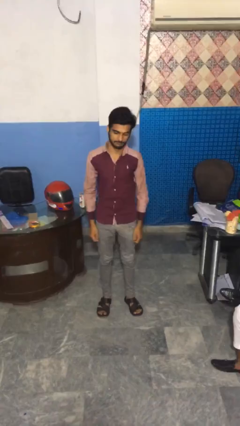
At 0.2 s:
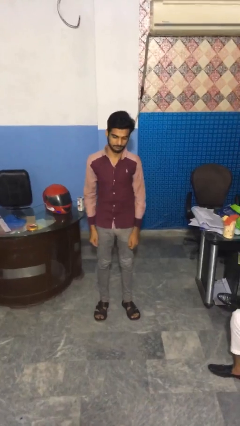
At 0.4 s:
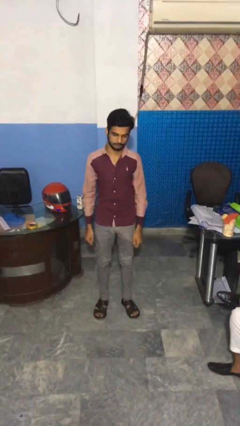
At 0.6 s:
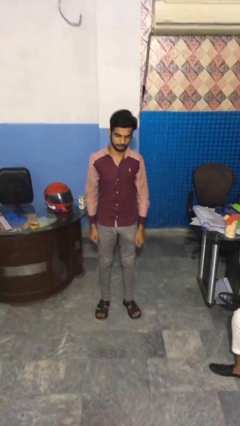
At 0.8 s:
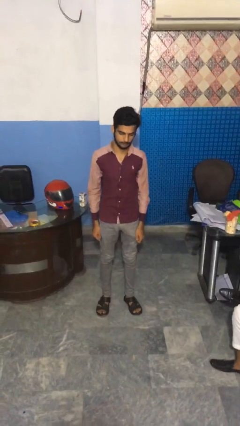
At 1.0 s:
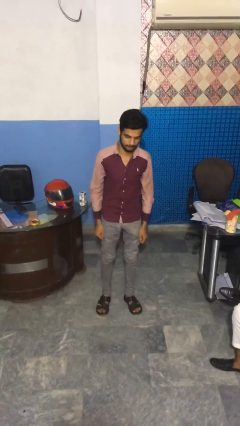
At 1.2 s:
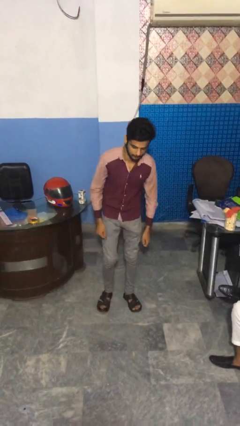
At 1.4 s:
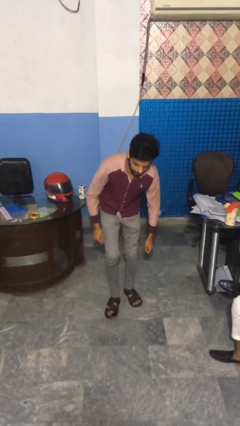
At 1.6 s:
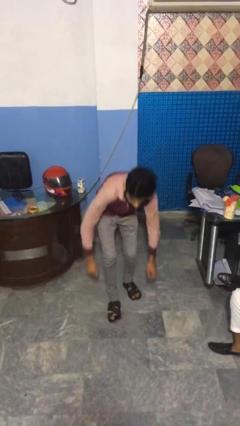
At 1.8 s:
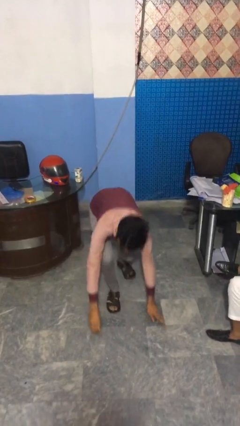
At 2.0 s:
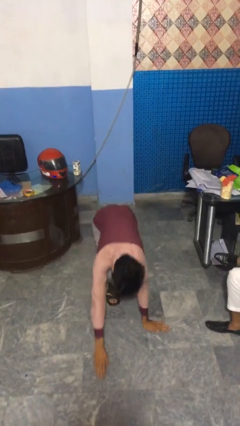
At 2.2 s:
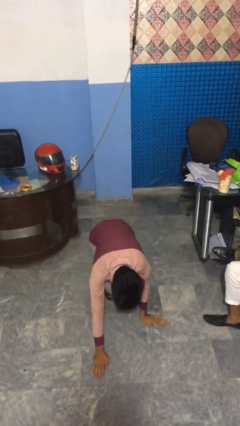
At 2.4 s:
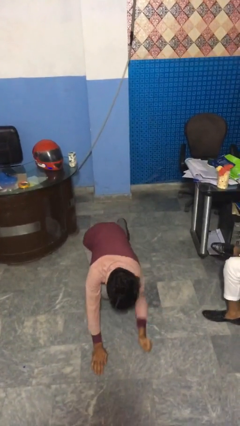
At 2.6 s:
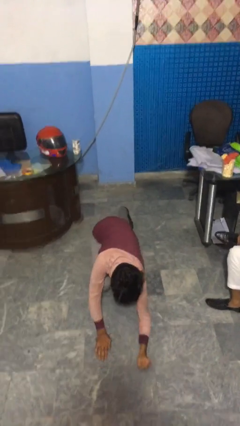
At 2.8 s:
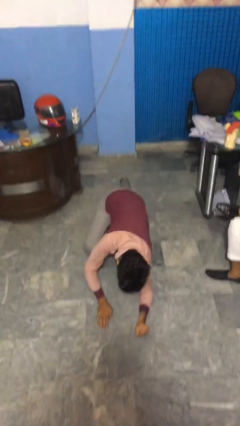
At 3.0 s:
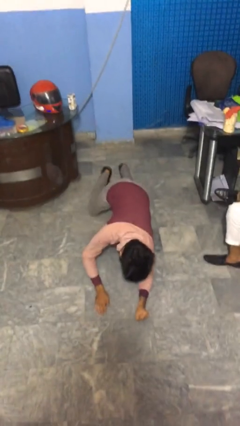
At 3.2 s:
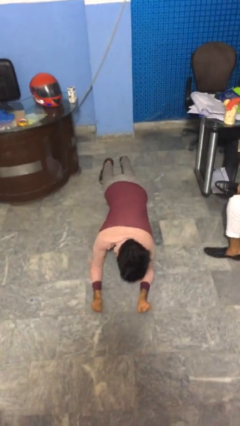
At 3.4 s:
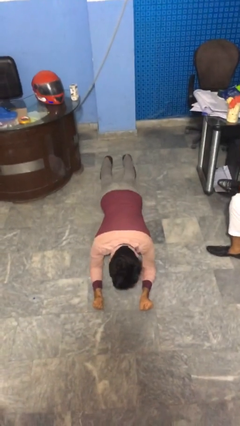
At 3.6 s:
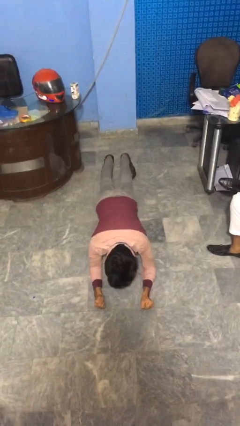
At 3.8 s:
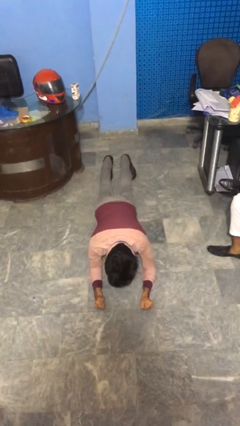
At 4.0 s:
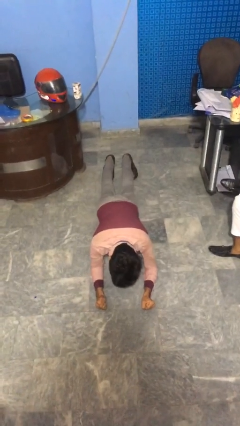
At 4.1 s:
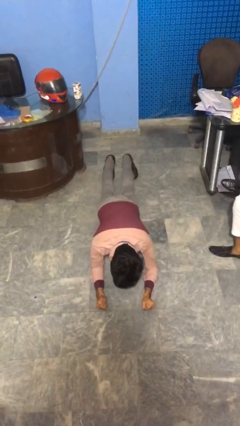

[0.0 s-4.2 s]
person exercises with plank

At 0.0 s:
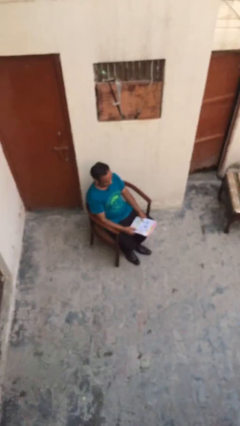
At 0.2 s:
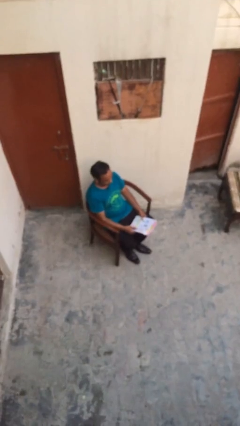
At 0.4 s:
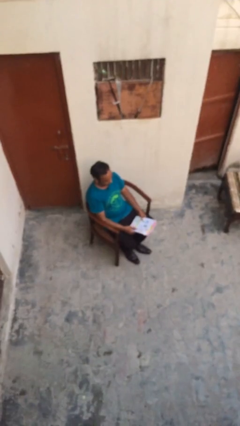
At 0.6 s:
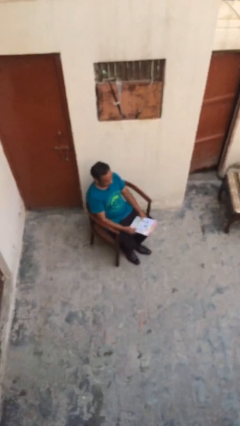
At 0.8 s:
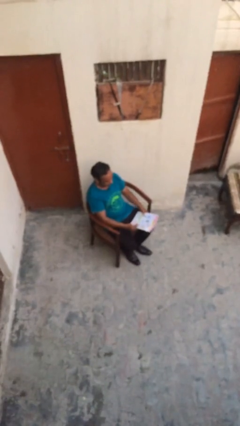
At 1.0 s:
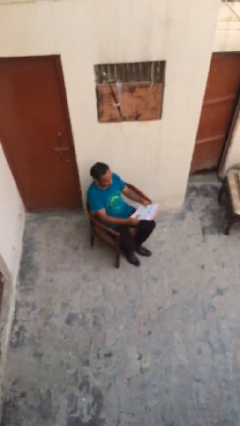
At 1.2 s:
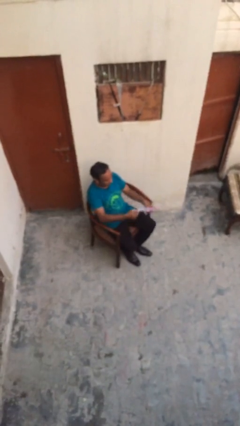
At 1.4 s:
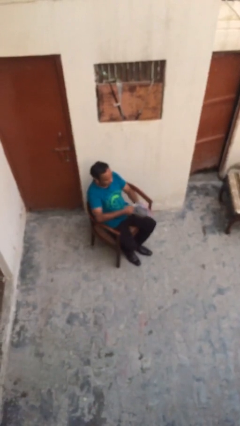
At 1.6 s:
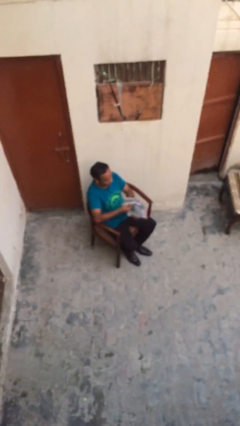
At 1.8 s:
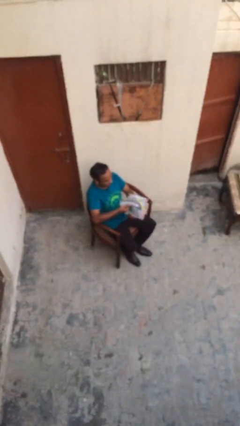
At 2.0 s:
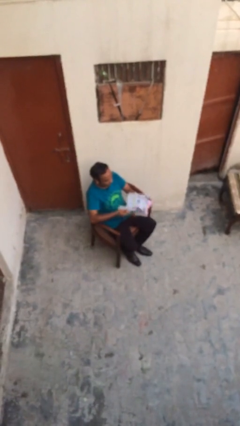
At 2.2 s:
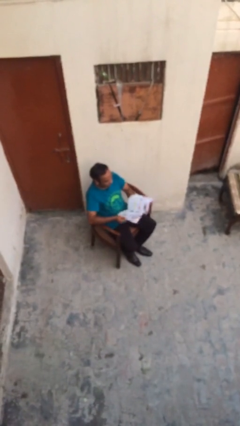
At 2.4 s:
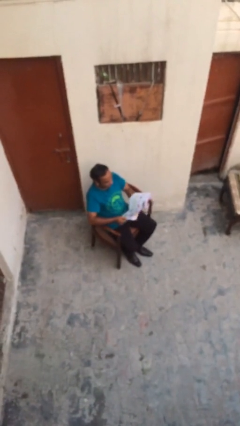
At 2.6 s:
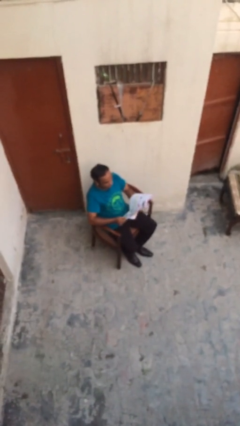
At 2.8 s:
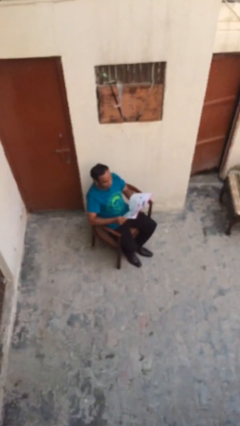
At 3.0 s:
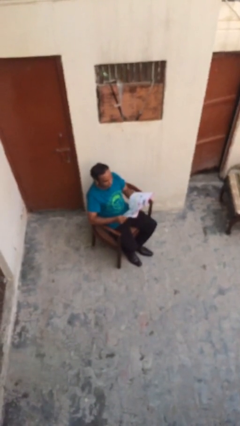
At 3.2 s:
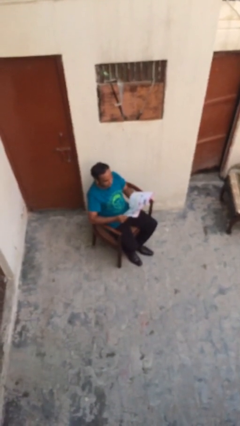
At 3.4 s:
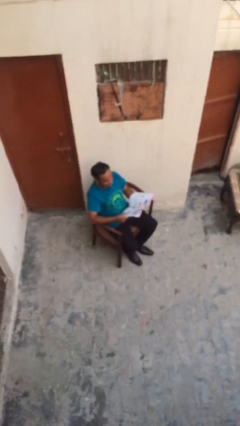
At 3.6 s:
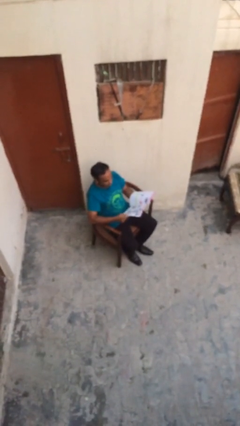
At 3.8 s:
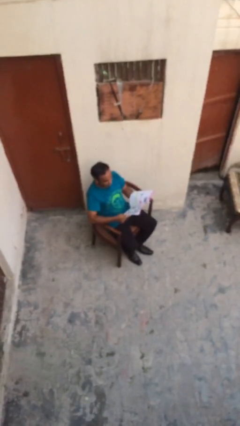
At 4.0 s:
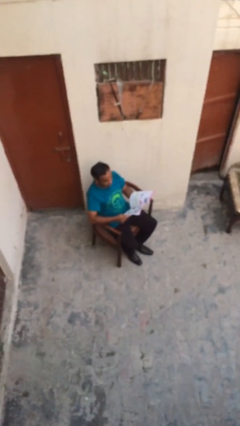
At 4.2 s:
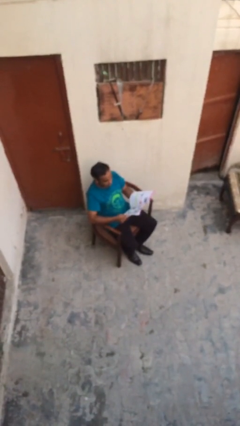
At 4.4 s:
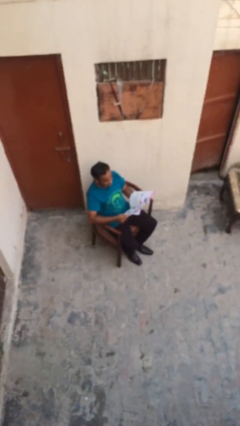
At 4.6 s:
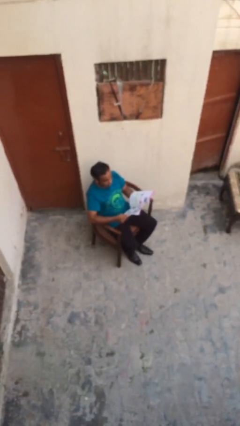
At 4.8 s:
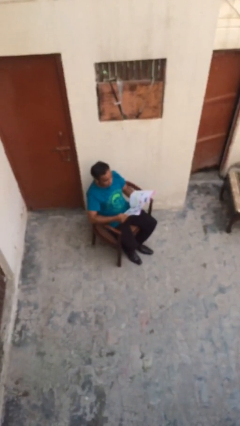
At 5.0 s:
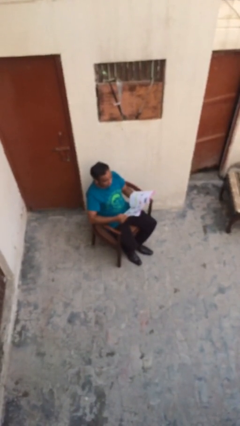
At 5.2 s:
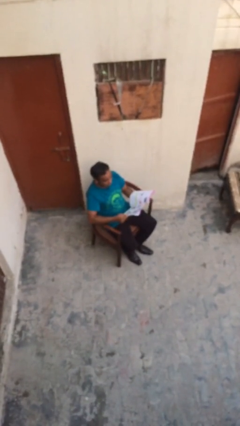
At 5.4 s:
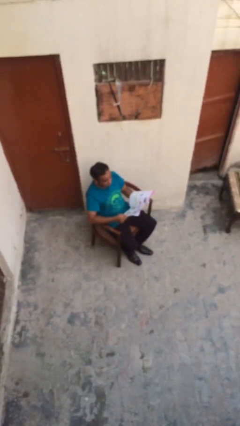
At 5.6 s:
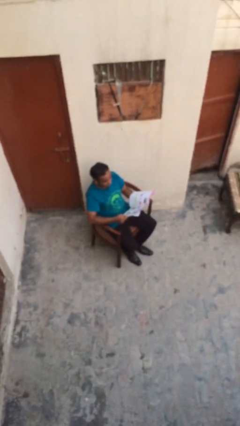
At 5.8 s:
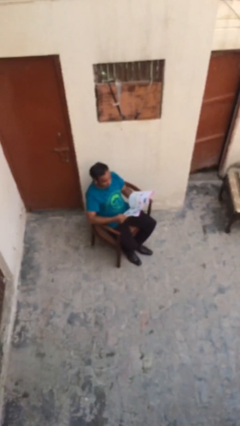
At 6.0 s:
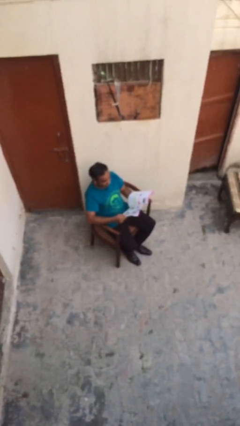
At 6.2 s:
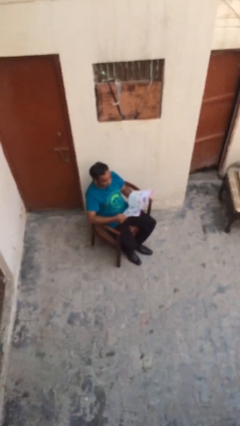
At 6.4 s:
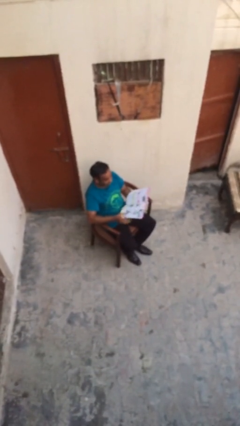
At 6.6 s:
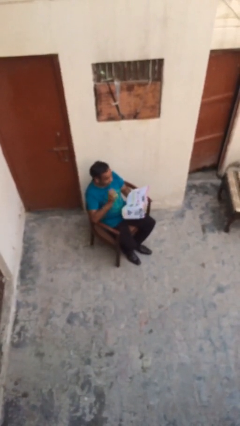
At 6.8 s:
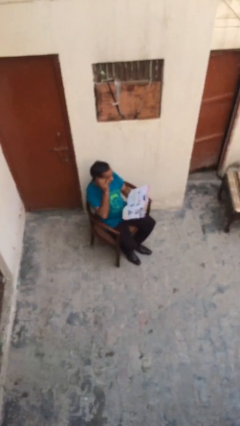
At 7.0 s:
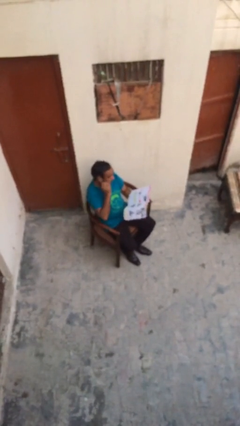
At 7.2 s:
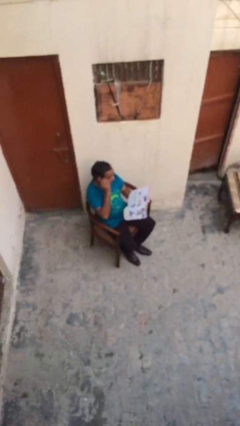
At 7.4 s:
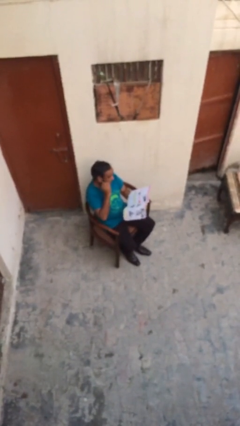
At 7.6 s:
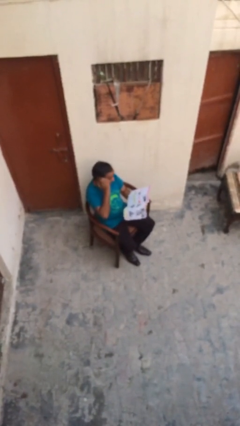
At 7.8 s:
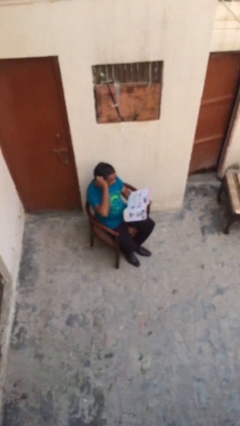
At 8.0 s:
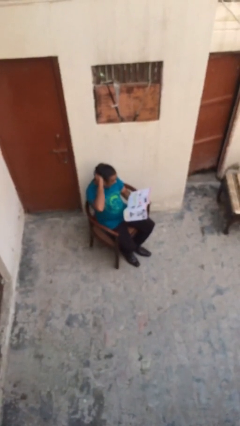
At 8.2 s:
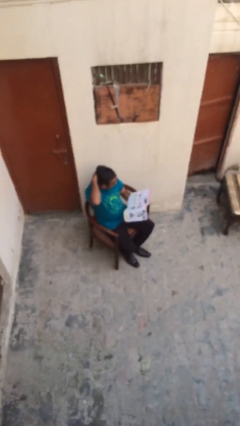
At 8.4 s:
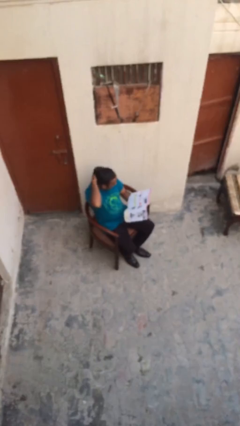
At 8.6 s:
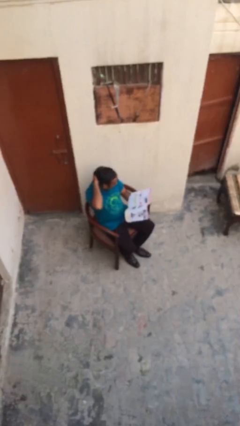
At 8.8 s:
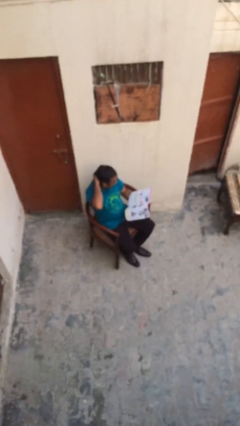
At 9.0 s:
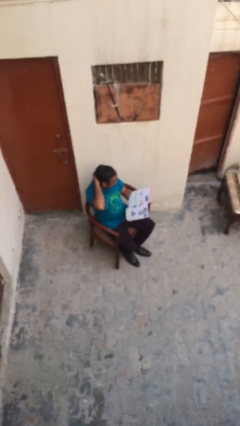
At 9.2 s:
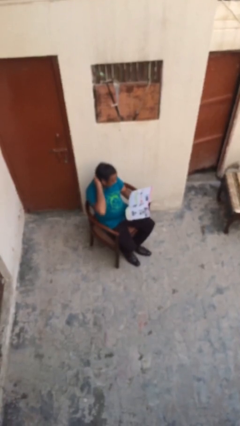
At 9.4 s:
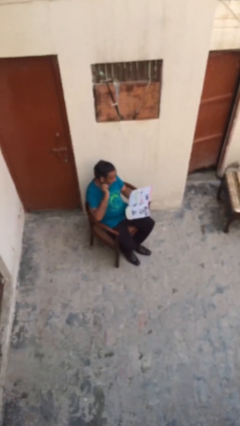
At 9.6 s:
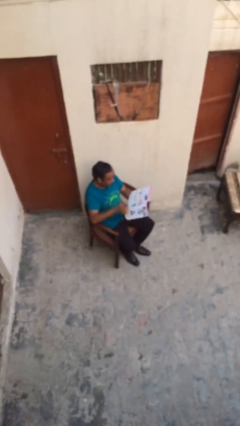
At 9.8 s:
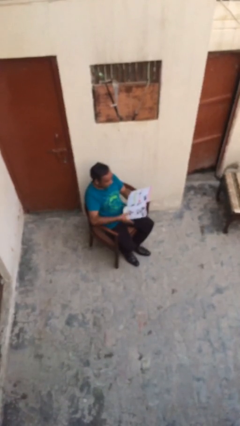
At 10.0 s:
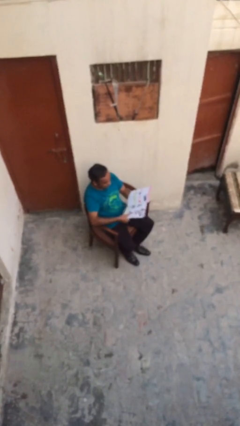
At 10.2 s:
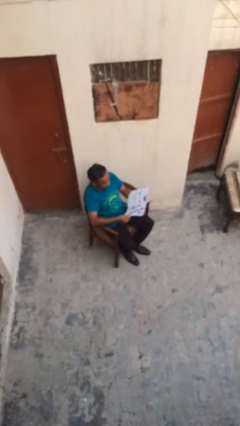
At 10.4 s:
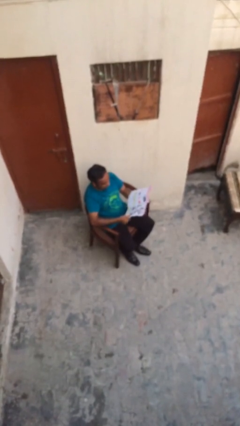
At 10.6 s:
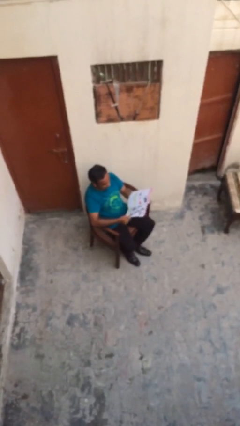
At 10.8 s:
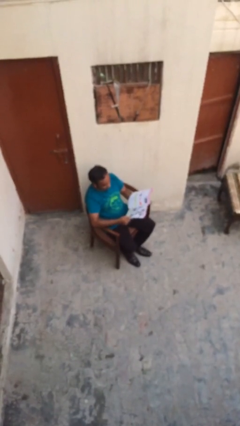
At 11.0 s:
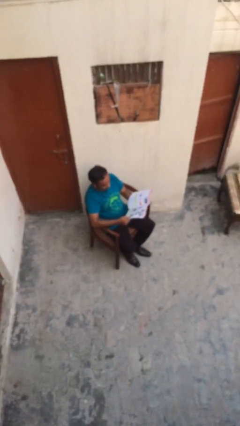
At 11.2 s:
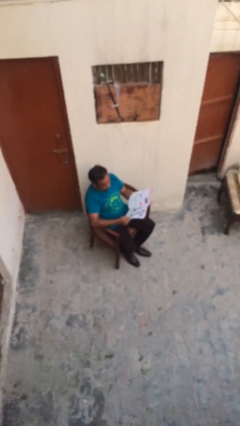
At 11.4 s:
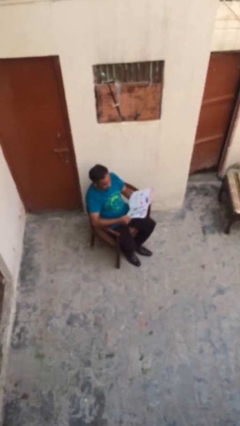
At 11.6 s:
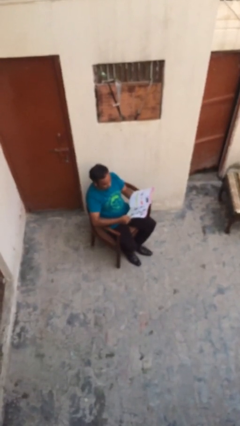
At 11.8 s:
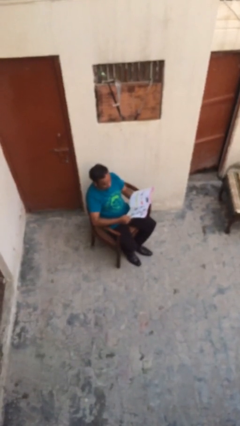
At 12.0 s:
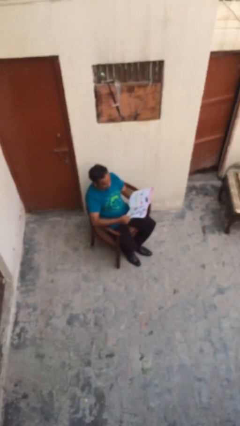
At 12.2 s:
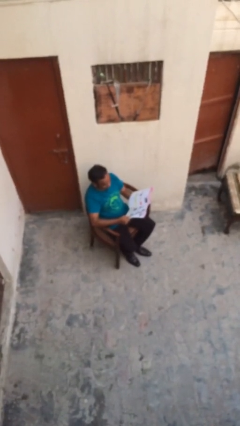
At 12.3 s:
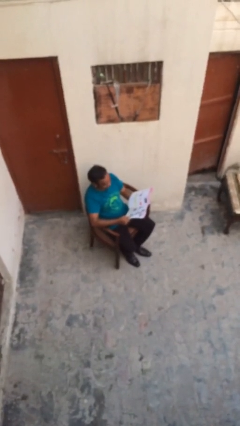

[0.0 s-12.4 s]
person reads document

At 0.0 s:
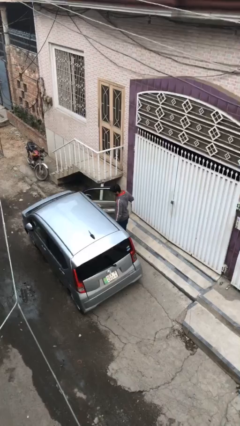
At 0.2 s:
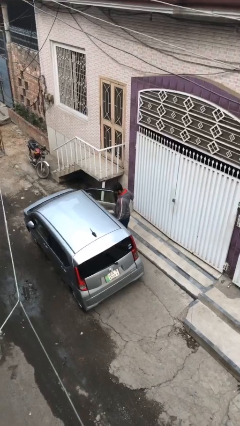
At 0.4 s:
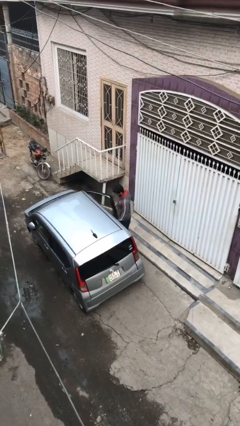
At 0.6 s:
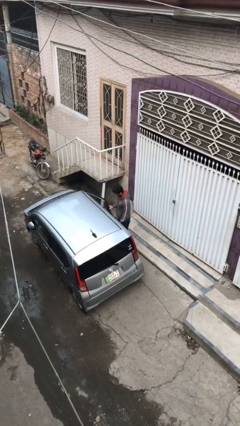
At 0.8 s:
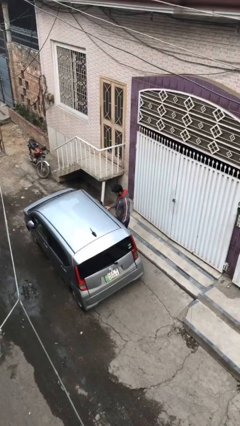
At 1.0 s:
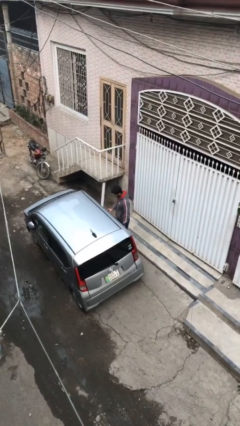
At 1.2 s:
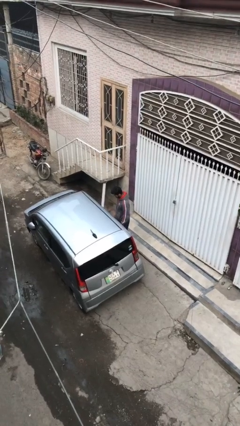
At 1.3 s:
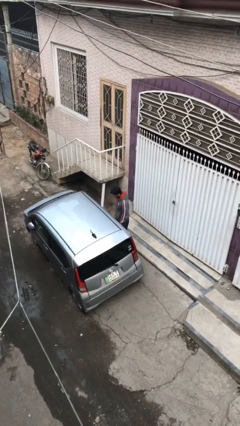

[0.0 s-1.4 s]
person closes car door
